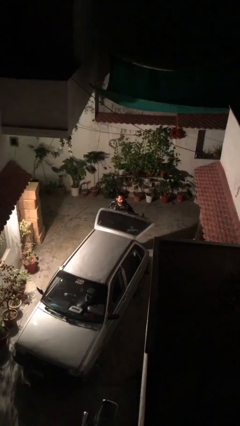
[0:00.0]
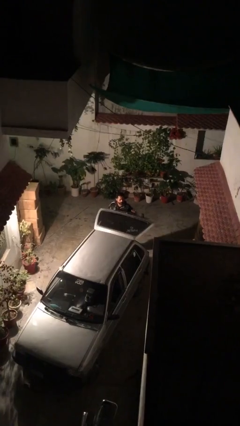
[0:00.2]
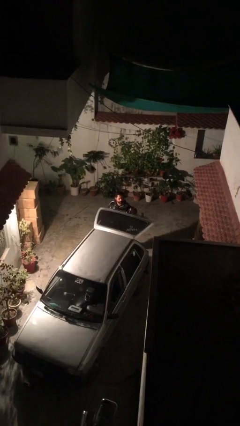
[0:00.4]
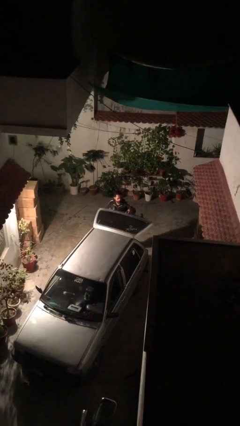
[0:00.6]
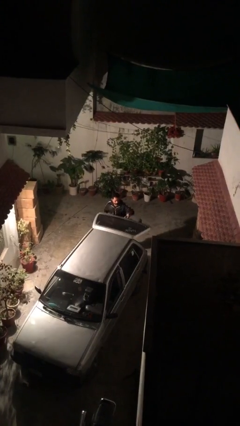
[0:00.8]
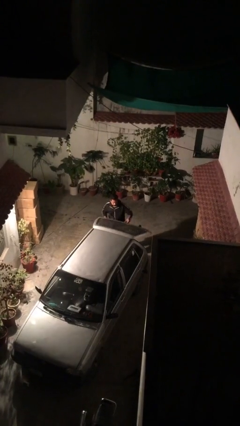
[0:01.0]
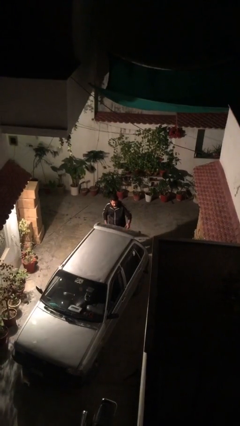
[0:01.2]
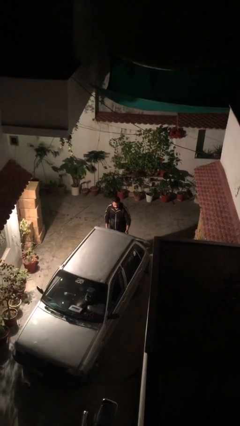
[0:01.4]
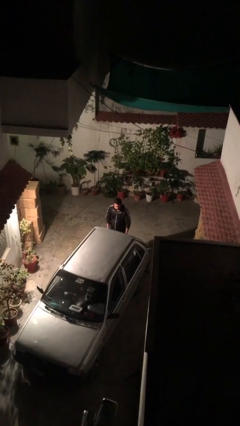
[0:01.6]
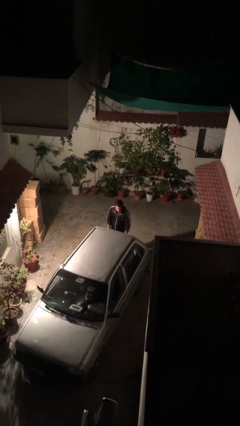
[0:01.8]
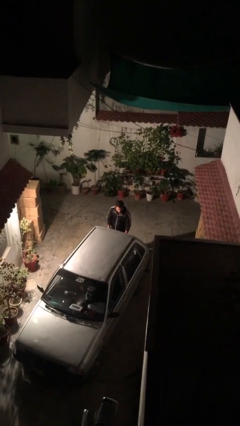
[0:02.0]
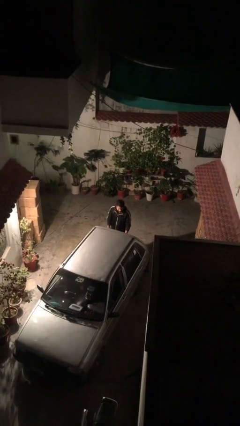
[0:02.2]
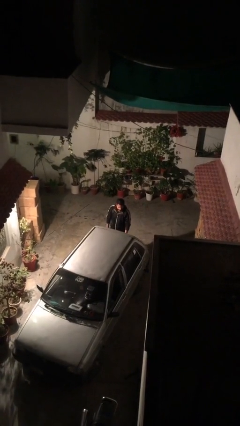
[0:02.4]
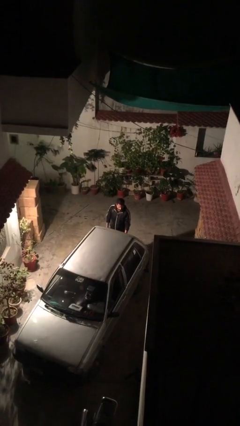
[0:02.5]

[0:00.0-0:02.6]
person closes car trunk

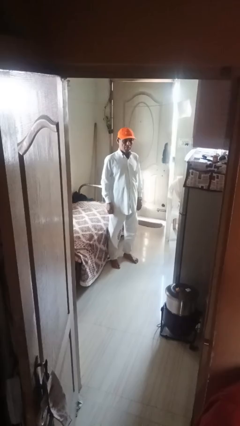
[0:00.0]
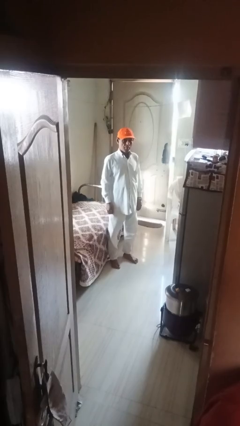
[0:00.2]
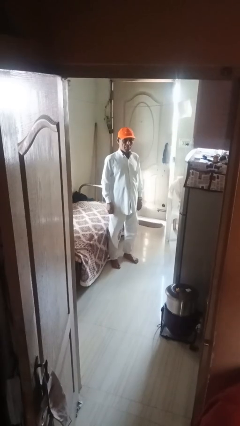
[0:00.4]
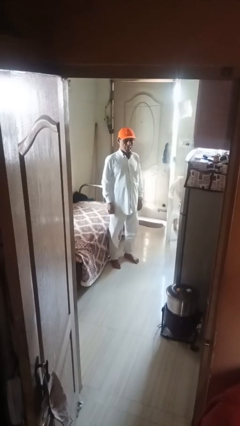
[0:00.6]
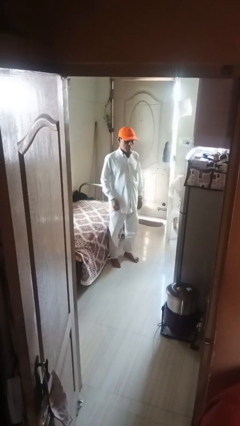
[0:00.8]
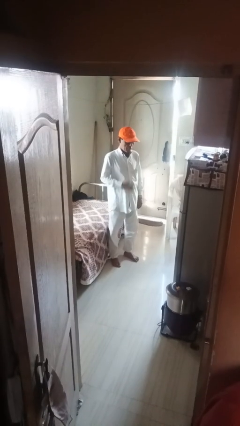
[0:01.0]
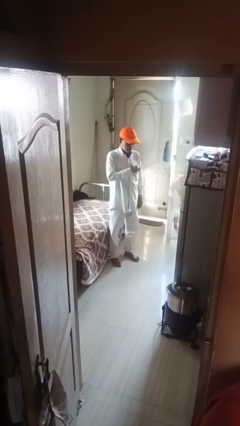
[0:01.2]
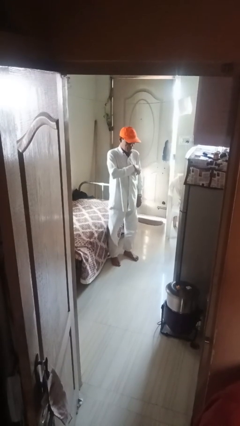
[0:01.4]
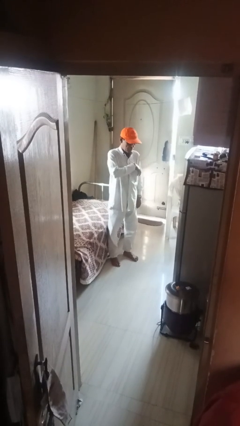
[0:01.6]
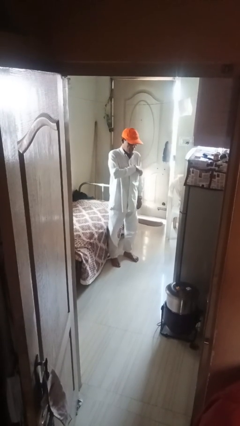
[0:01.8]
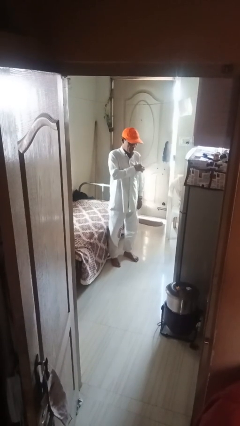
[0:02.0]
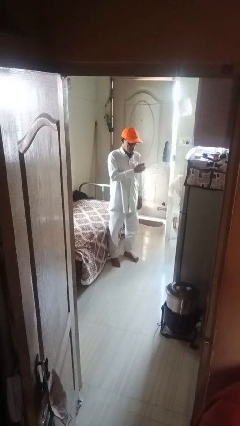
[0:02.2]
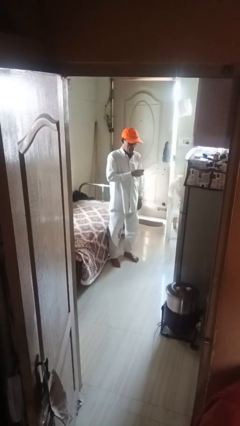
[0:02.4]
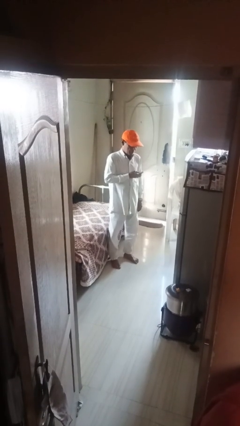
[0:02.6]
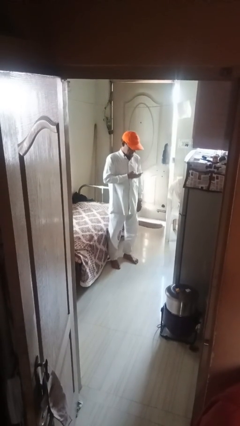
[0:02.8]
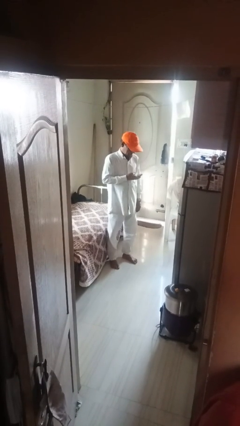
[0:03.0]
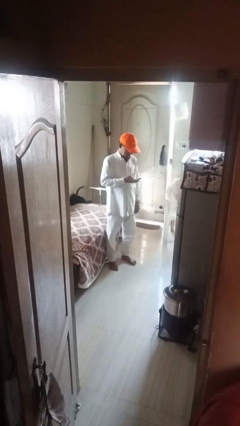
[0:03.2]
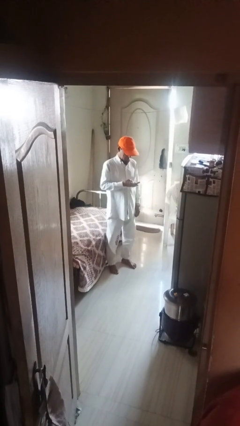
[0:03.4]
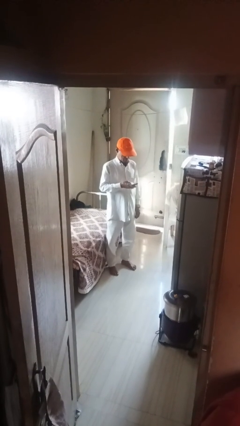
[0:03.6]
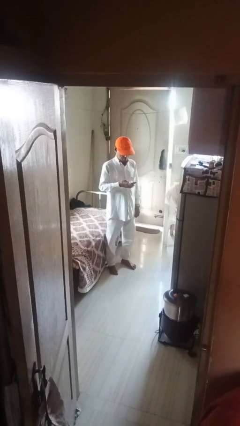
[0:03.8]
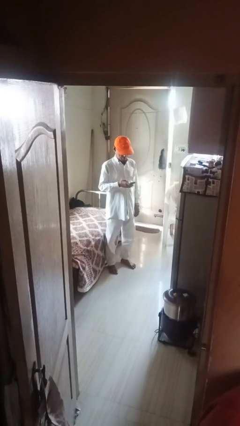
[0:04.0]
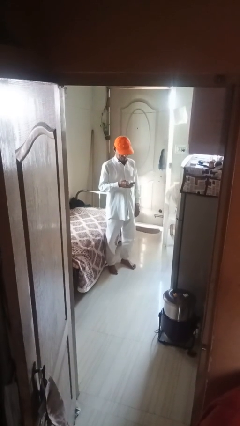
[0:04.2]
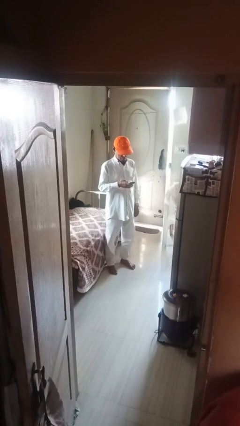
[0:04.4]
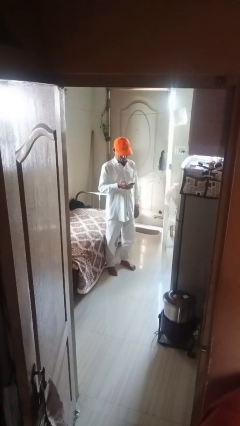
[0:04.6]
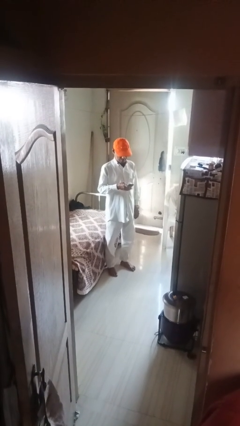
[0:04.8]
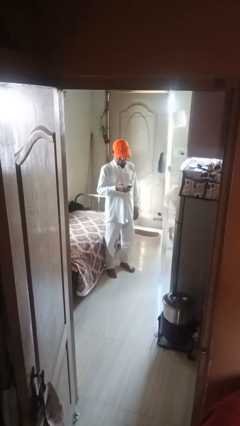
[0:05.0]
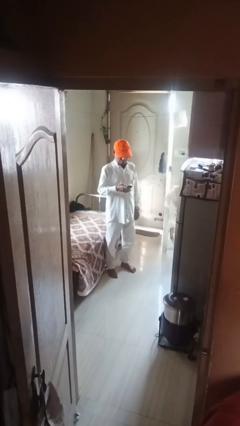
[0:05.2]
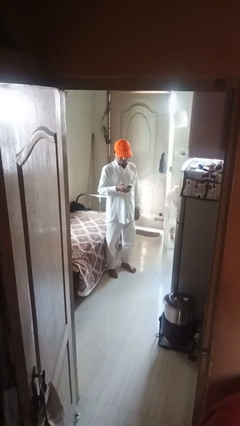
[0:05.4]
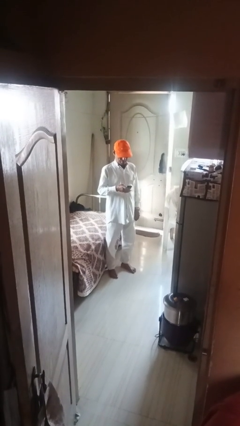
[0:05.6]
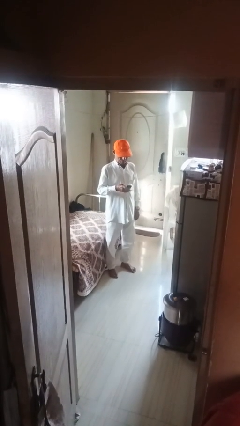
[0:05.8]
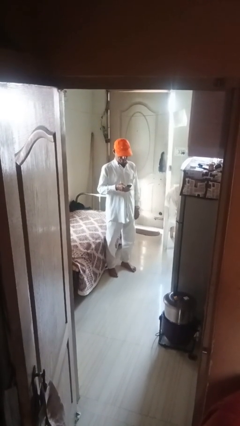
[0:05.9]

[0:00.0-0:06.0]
person takes phone from pocket

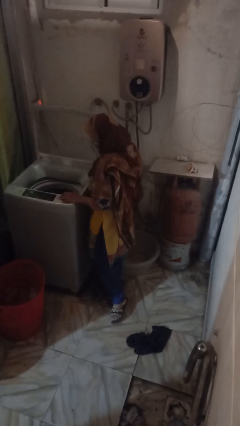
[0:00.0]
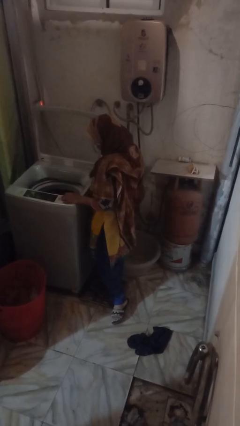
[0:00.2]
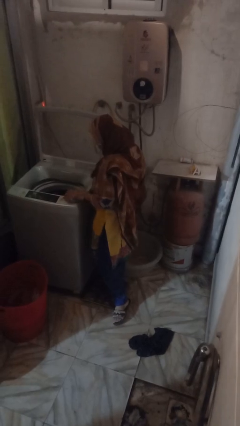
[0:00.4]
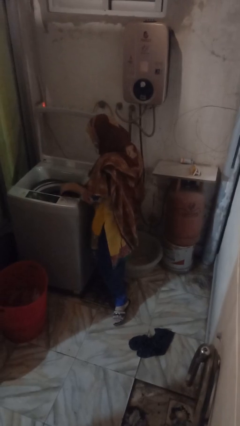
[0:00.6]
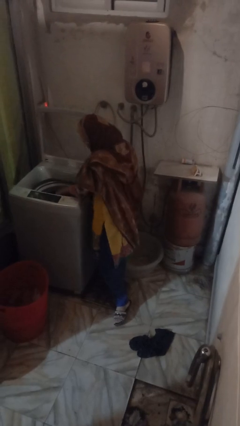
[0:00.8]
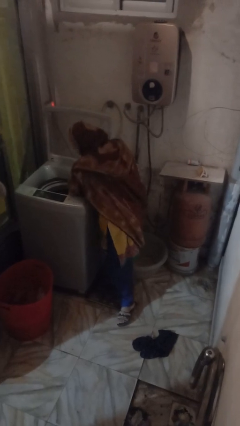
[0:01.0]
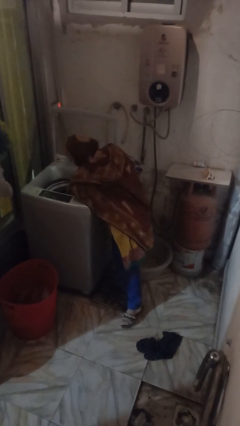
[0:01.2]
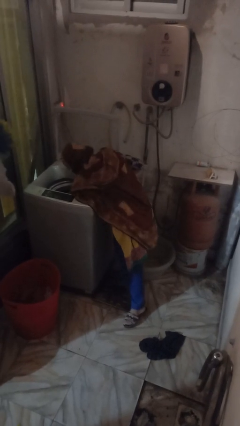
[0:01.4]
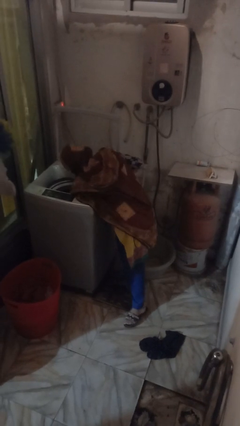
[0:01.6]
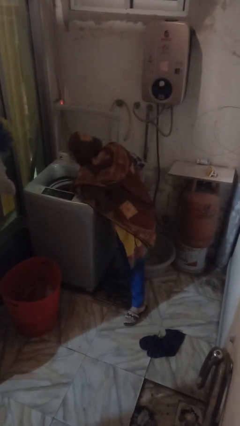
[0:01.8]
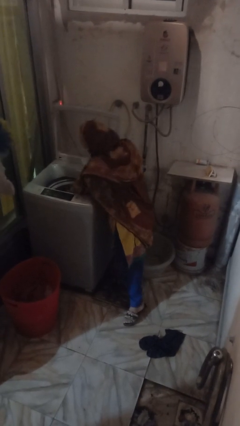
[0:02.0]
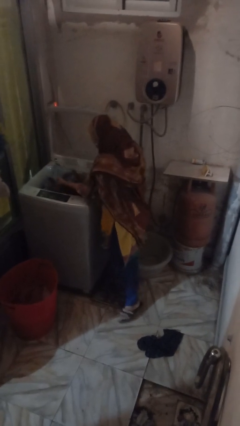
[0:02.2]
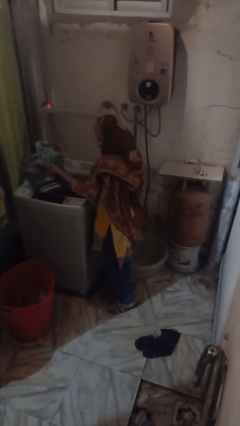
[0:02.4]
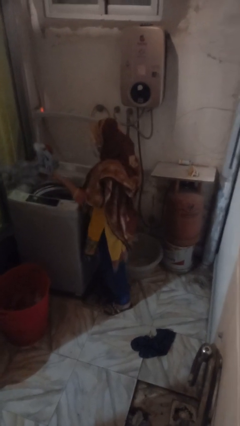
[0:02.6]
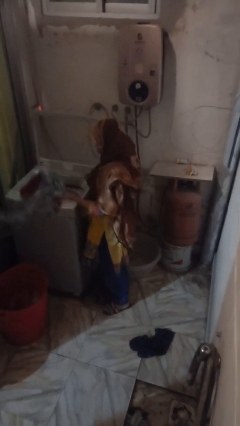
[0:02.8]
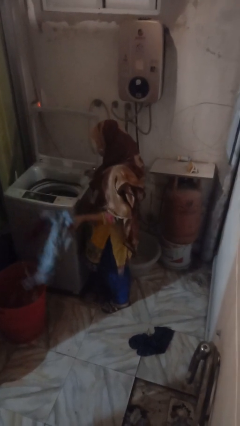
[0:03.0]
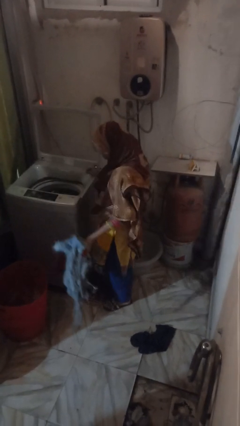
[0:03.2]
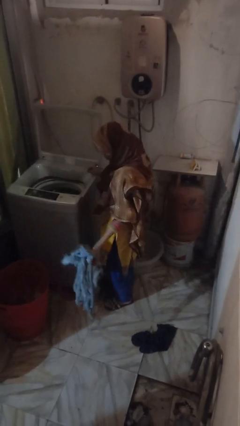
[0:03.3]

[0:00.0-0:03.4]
person unloads clotheswasher

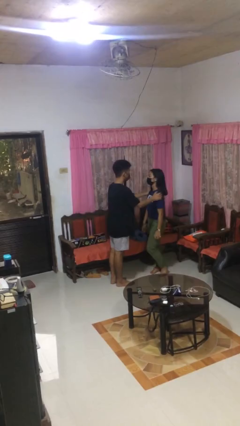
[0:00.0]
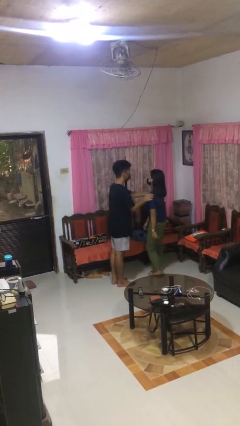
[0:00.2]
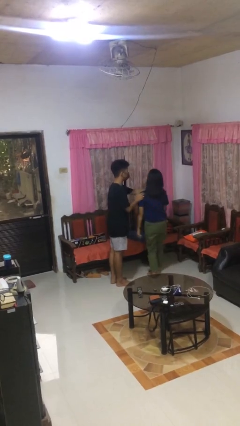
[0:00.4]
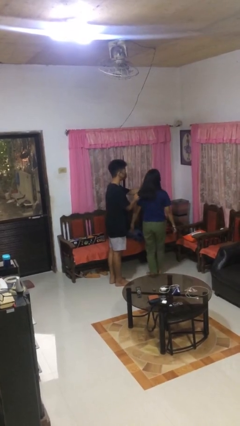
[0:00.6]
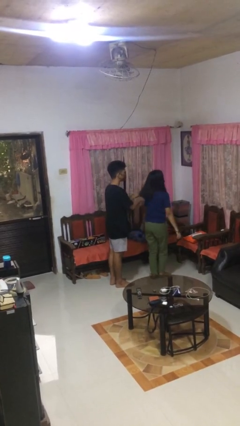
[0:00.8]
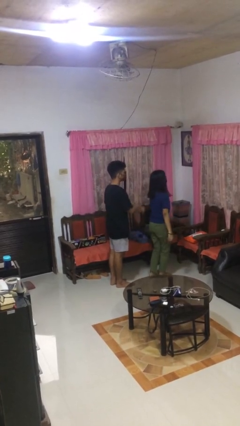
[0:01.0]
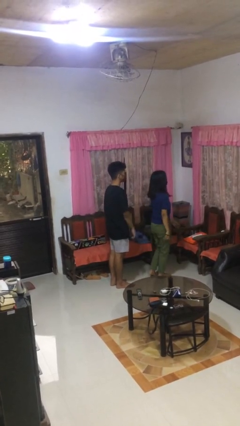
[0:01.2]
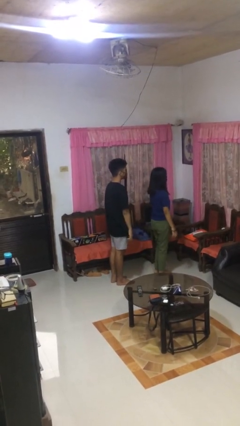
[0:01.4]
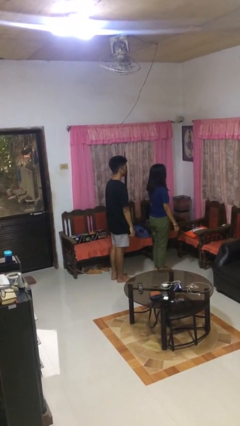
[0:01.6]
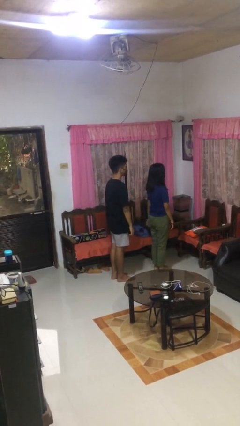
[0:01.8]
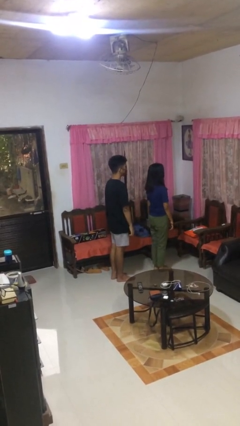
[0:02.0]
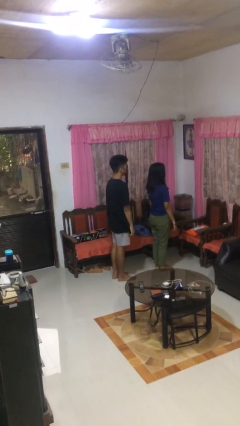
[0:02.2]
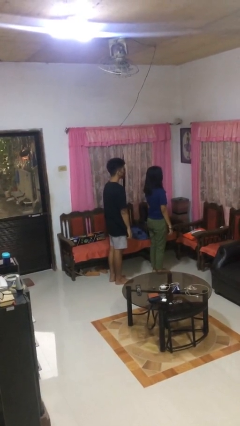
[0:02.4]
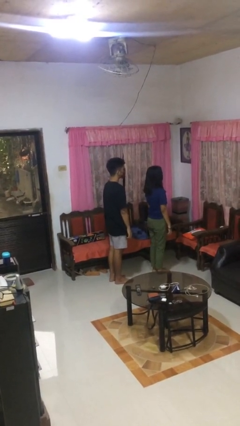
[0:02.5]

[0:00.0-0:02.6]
person spins person around

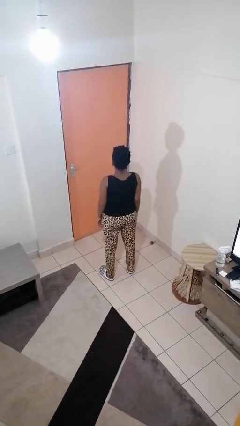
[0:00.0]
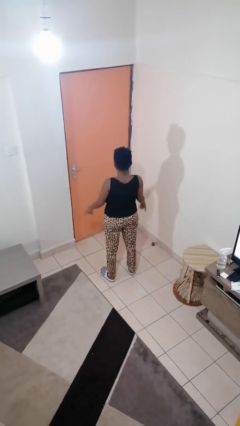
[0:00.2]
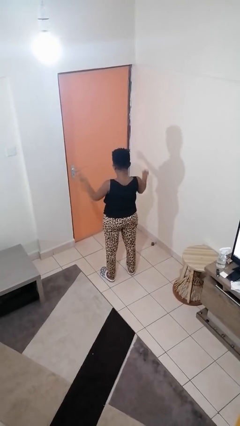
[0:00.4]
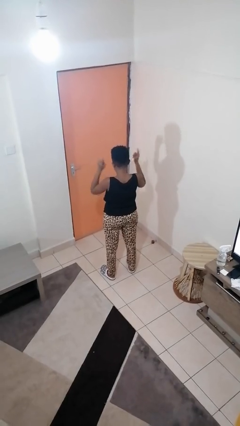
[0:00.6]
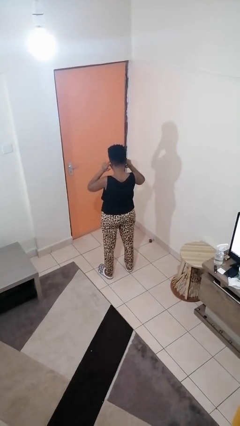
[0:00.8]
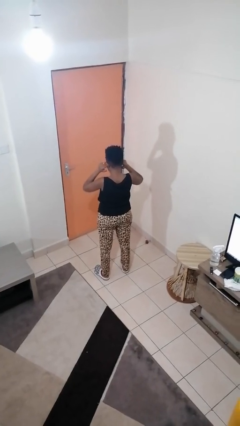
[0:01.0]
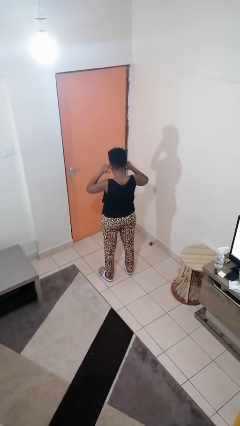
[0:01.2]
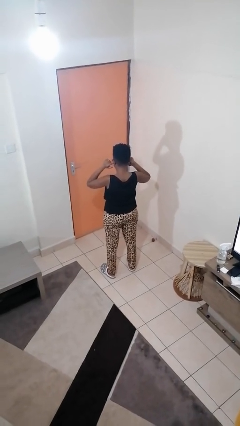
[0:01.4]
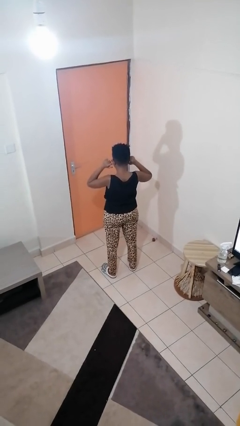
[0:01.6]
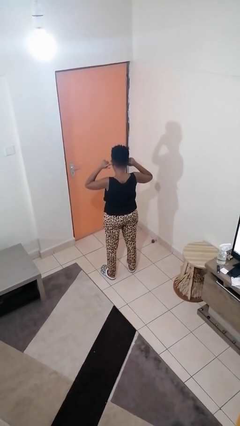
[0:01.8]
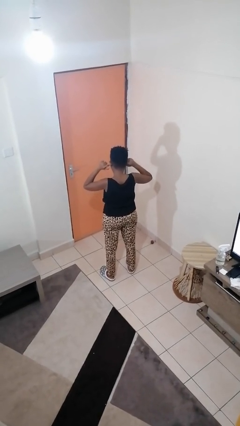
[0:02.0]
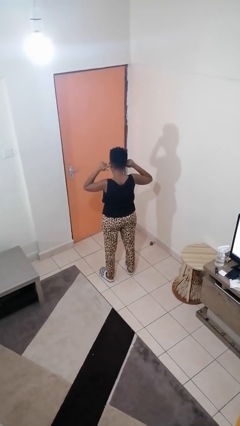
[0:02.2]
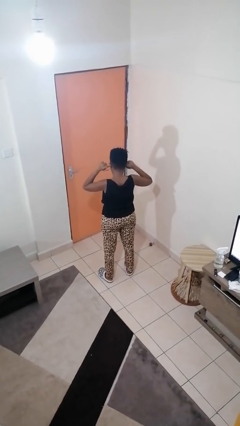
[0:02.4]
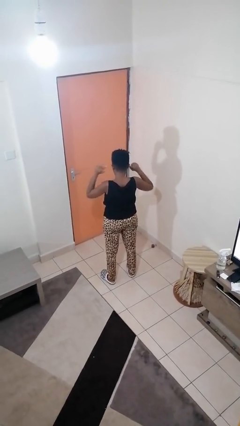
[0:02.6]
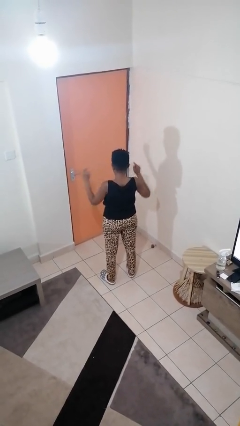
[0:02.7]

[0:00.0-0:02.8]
person puts fingers in ear
